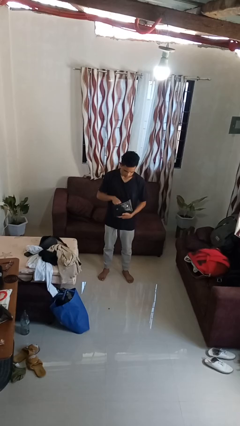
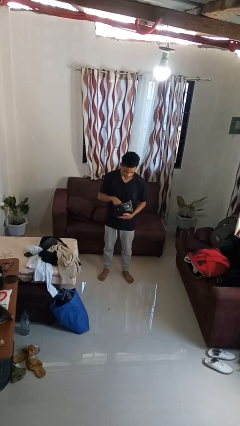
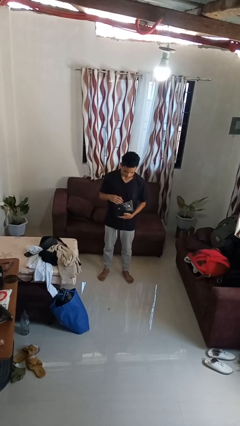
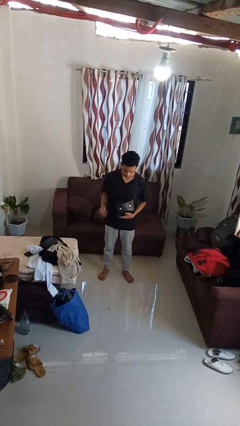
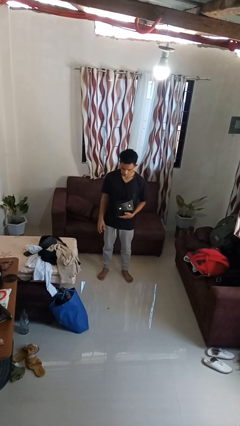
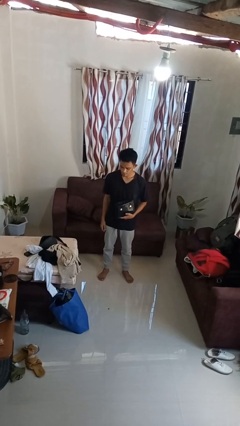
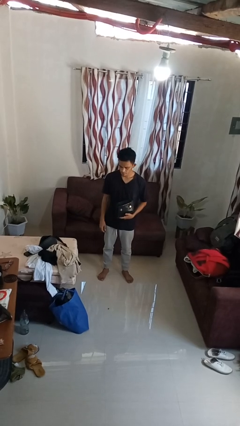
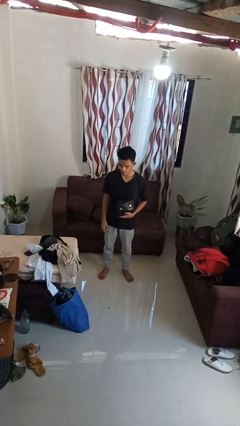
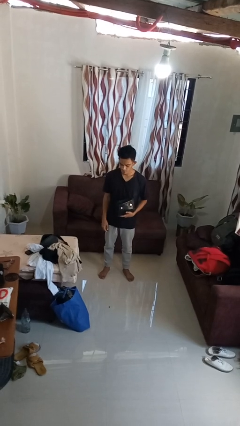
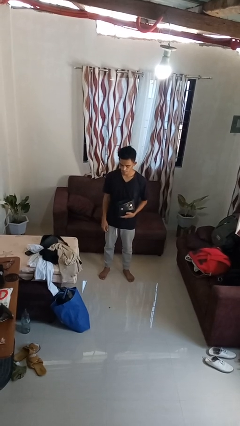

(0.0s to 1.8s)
person puts object into purse

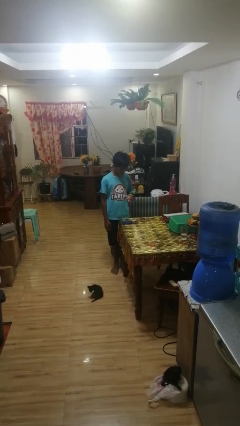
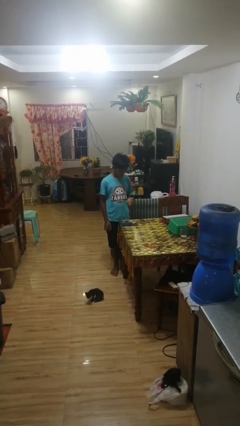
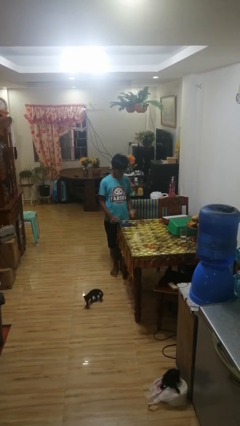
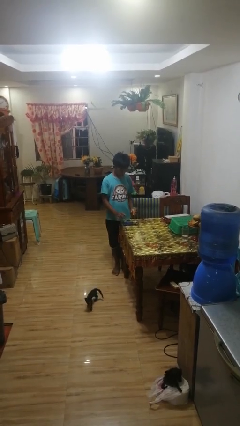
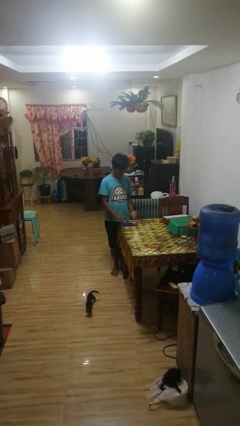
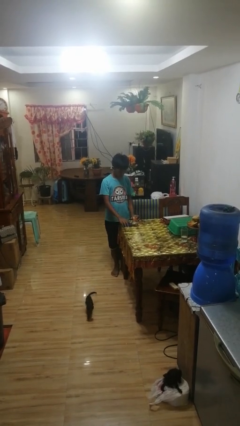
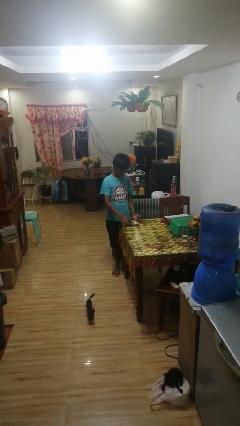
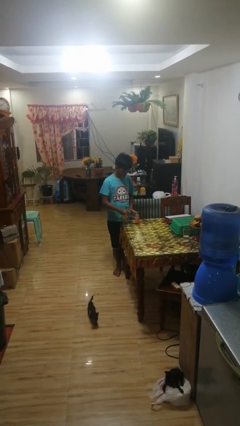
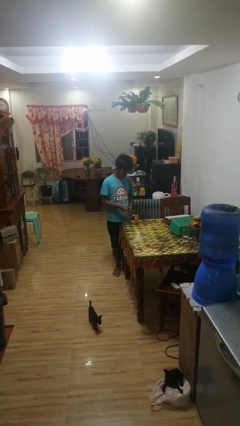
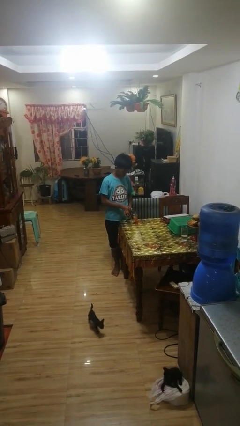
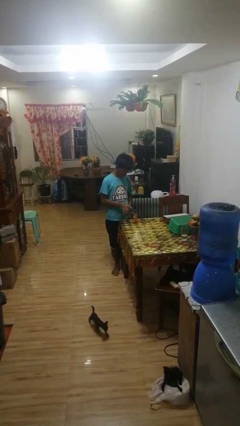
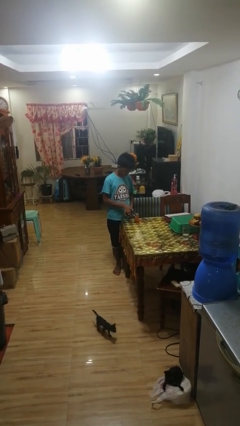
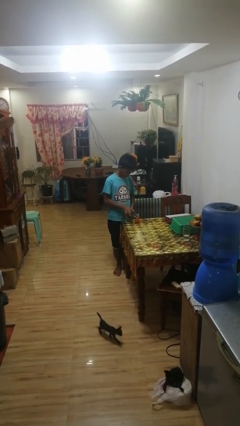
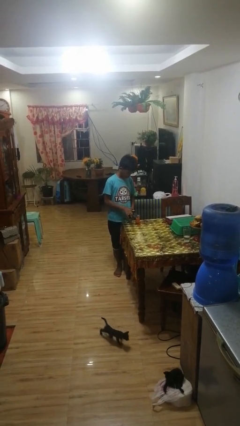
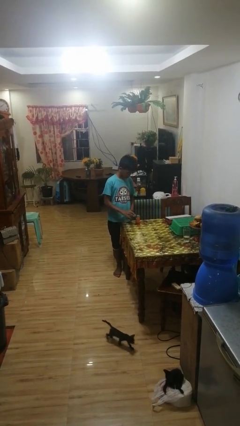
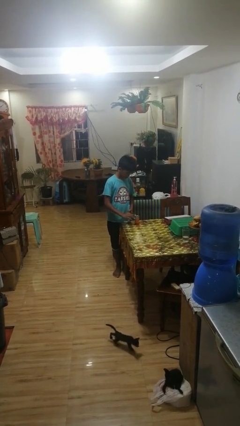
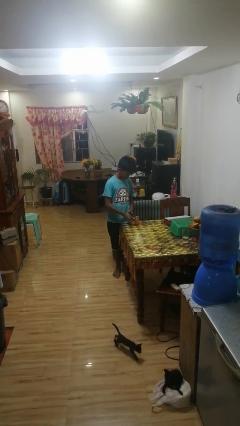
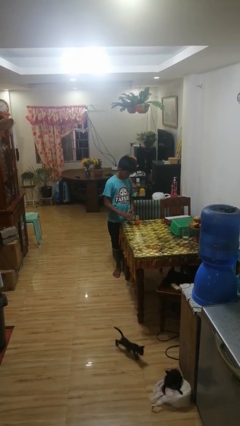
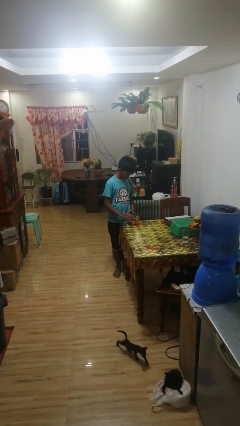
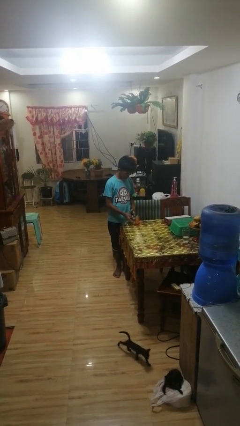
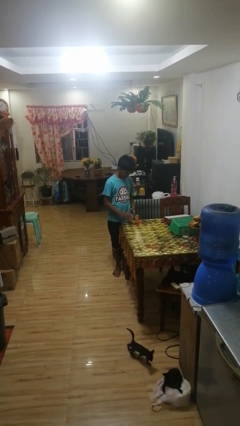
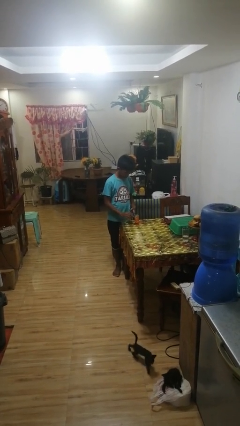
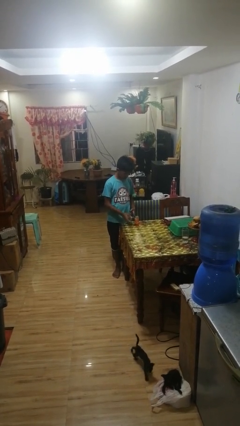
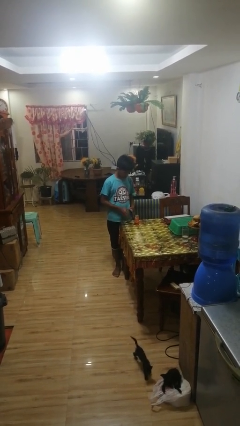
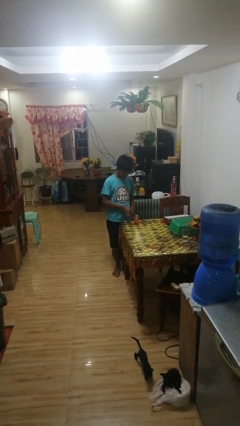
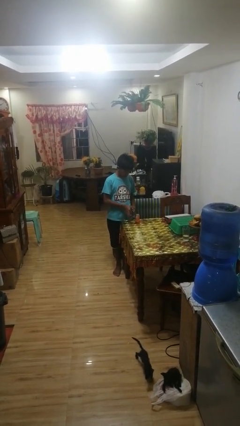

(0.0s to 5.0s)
person opens can with can opener

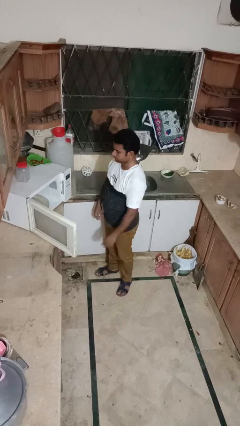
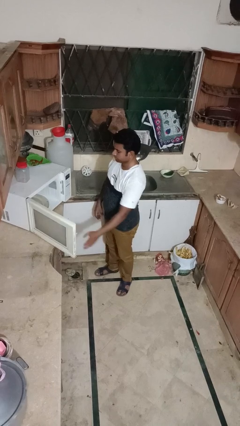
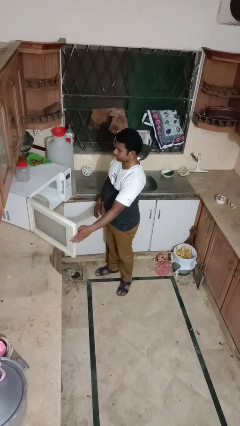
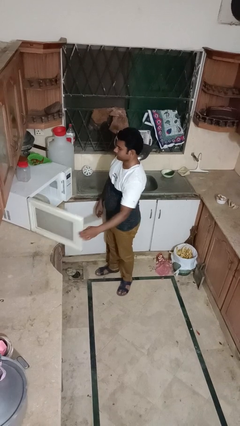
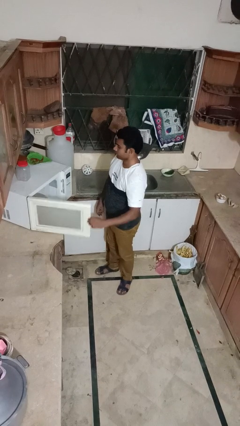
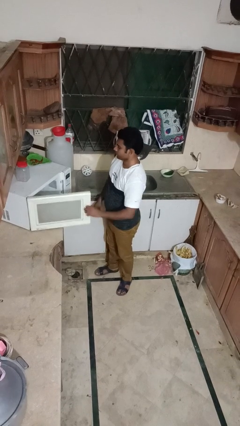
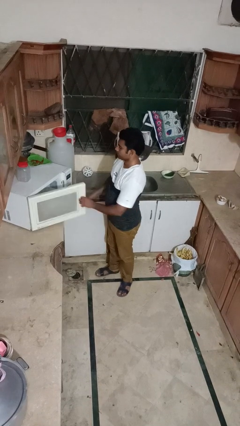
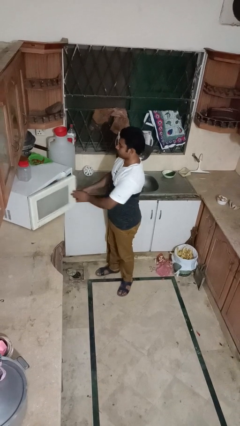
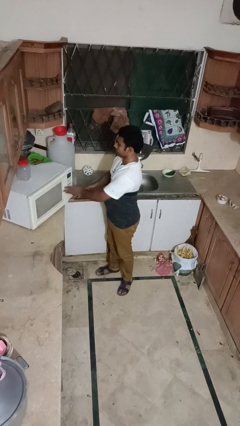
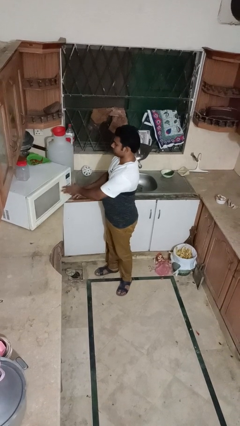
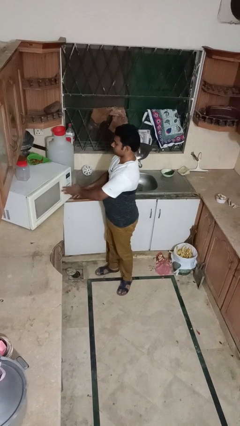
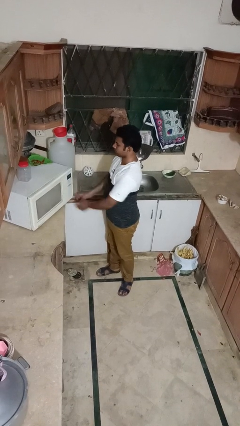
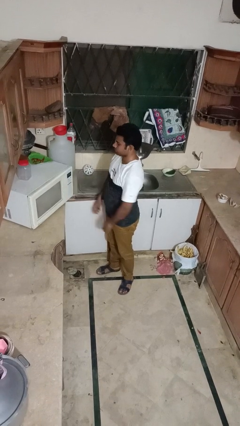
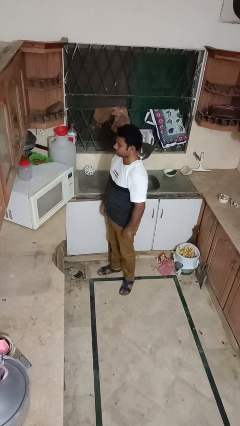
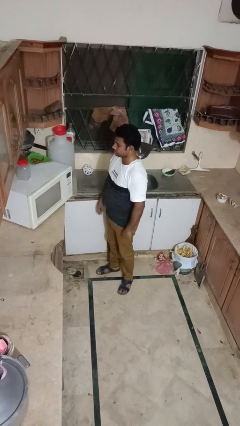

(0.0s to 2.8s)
person closes oven door

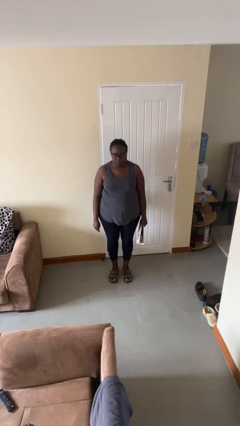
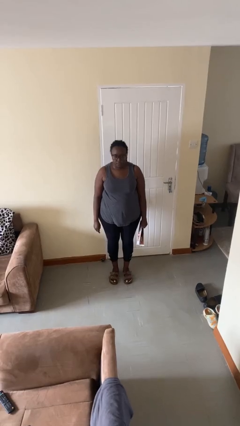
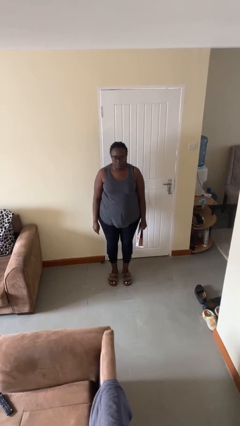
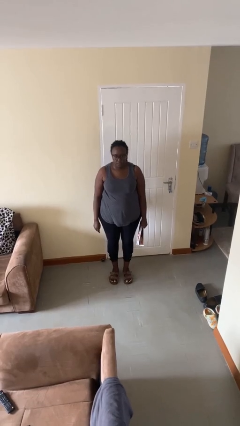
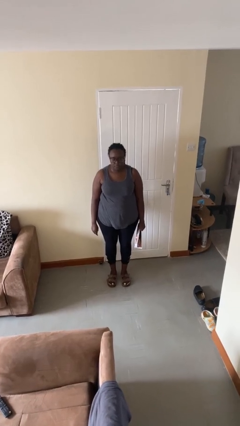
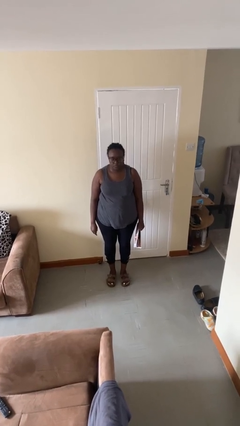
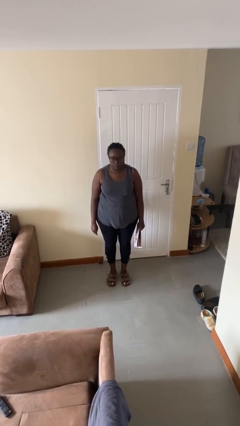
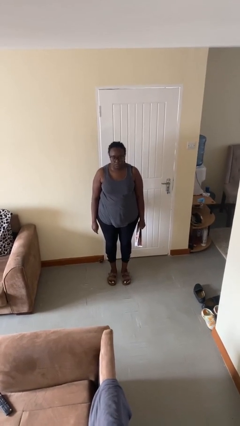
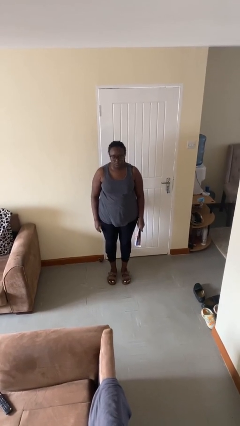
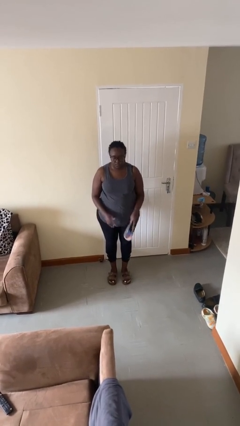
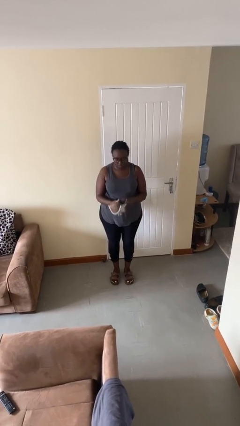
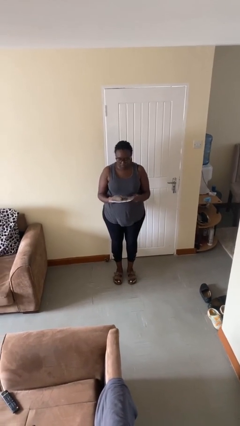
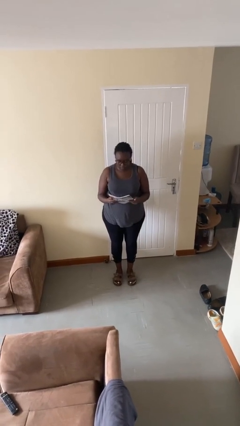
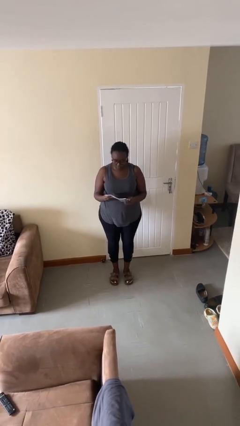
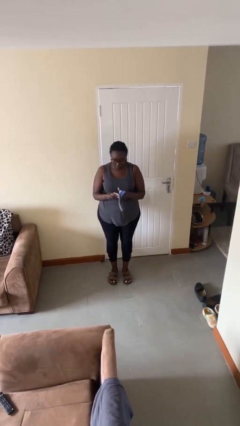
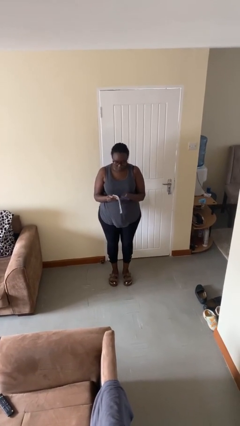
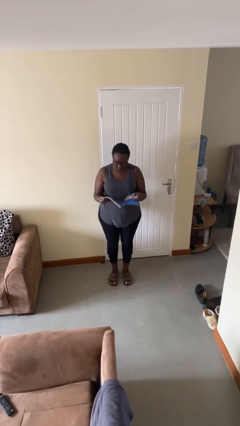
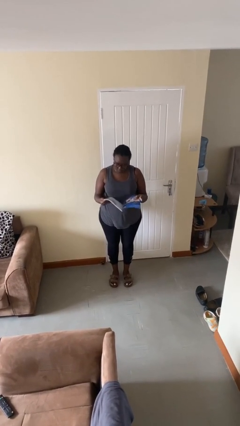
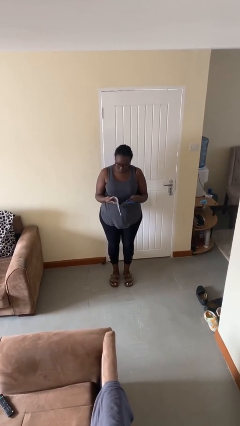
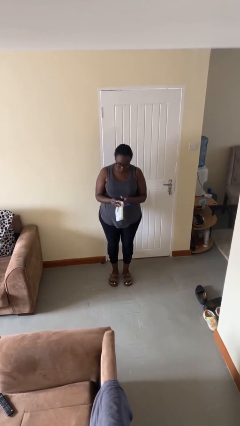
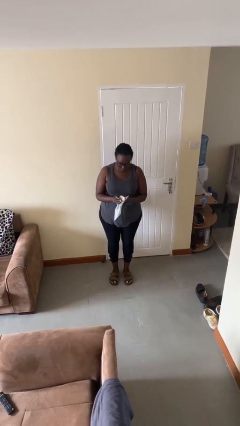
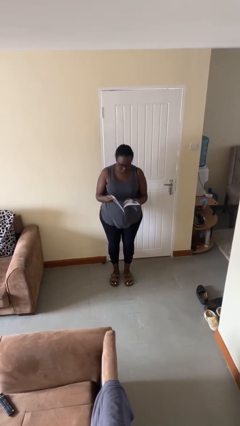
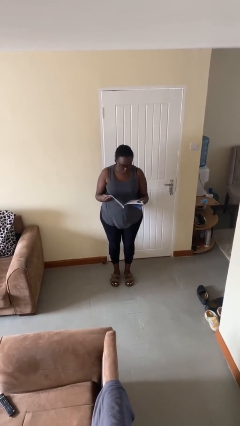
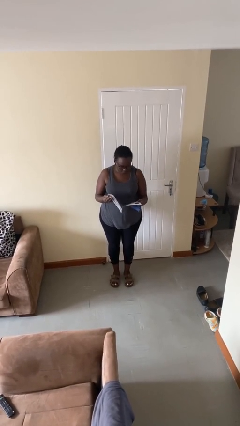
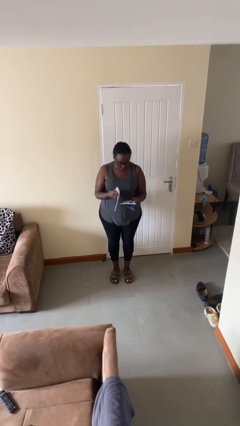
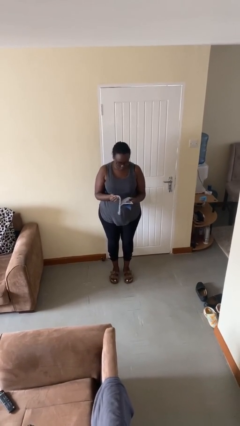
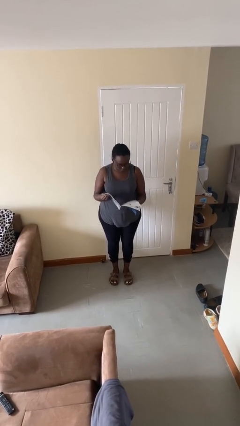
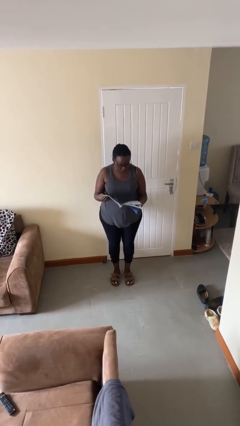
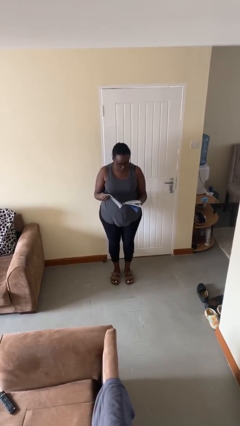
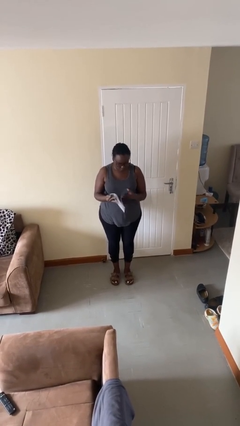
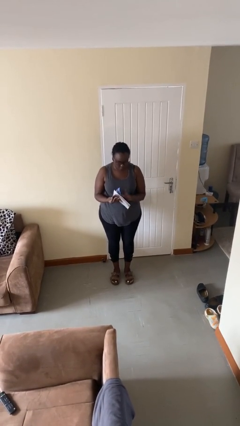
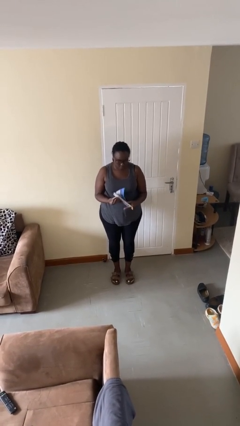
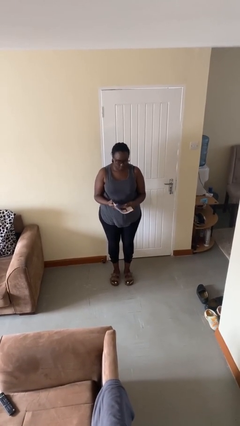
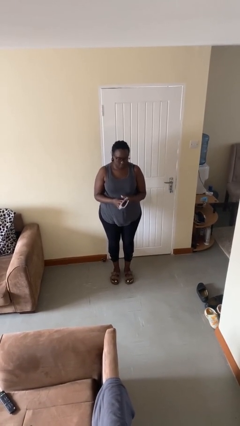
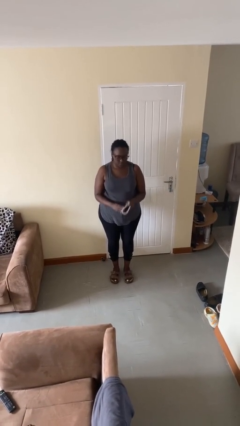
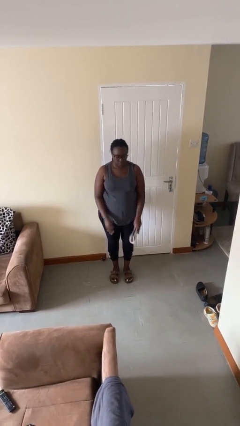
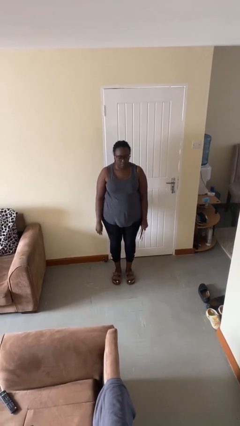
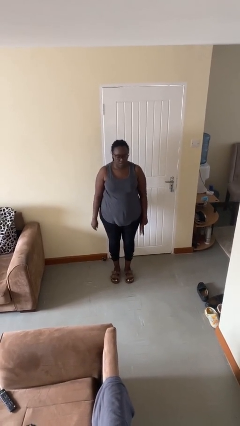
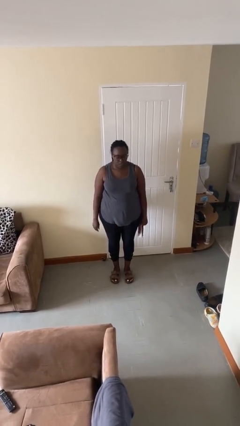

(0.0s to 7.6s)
person reads magazine

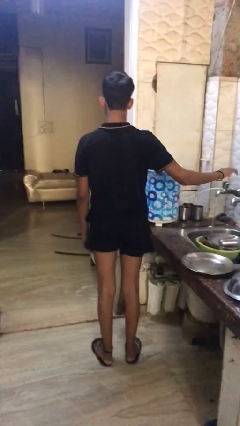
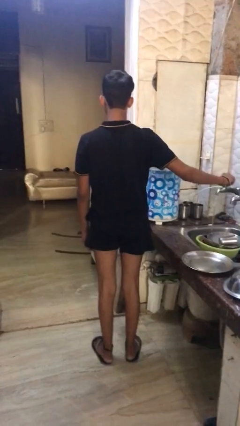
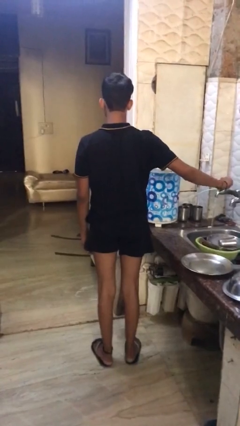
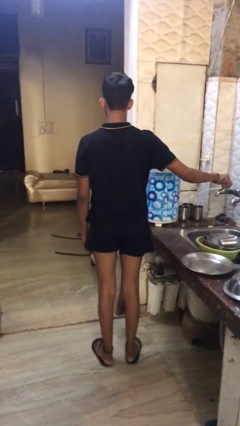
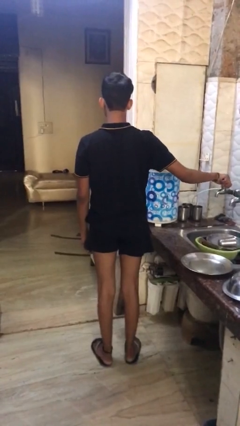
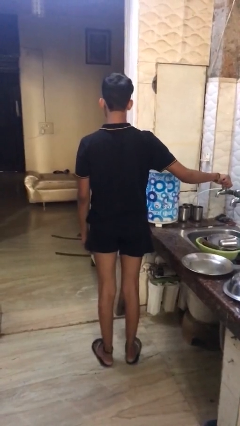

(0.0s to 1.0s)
person turns off faucet
